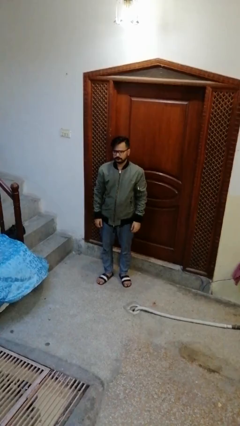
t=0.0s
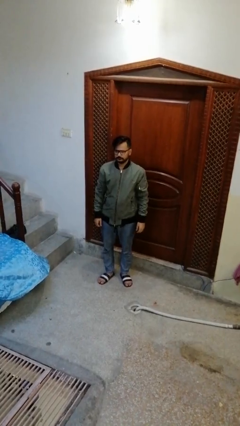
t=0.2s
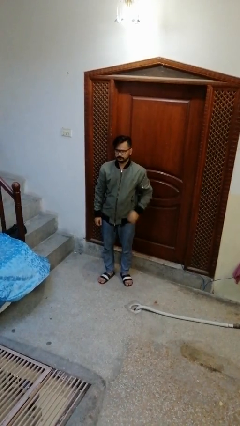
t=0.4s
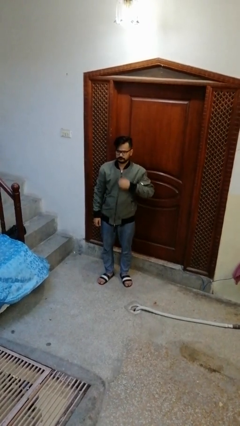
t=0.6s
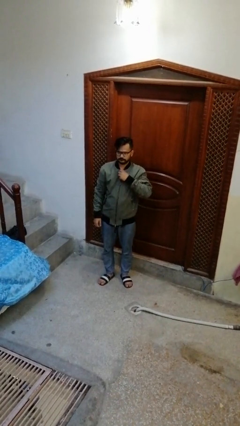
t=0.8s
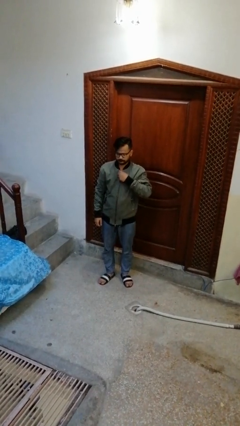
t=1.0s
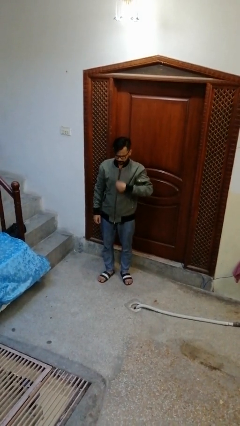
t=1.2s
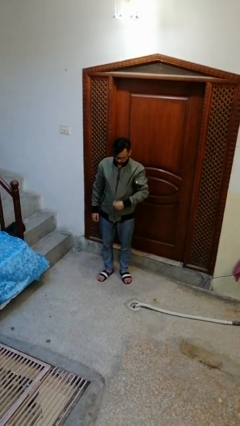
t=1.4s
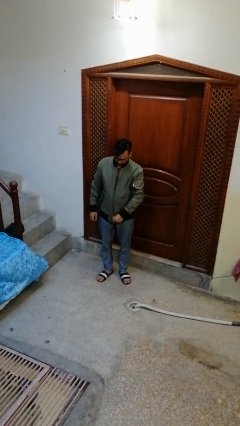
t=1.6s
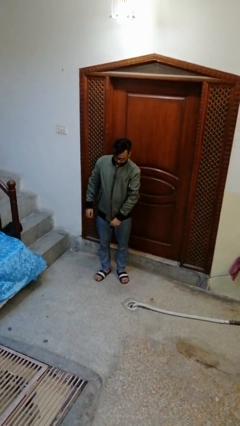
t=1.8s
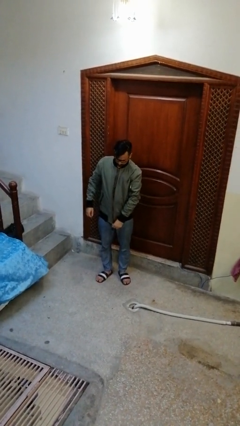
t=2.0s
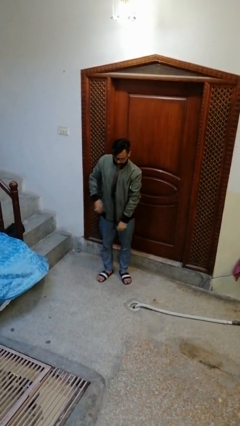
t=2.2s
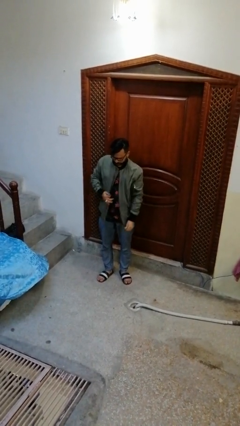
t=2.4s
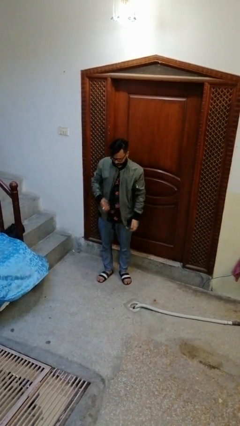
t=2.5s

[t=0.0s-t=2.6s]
person unzips jacket

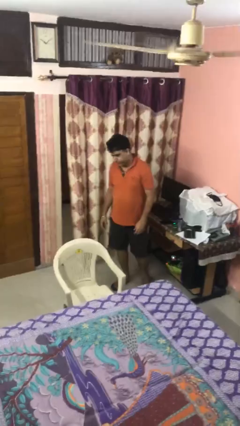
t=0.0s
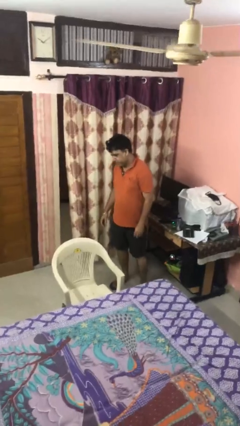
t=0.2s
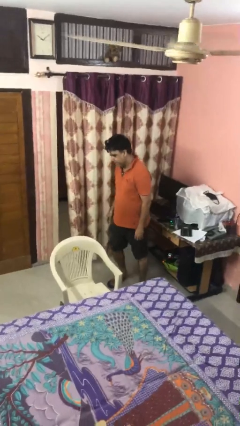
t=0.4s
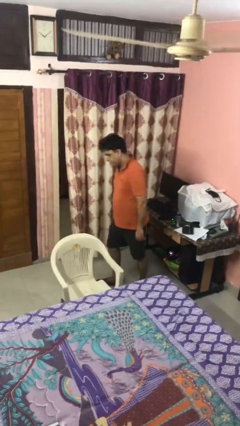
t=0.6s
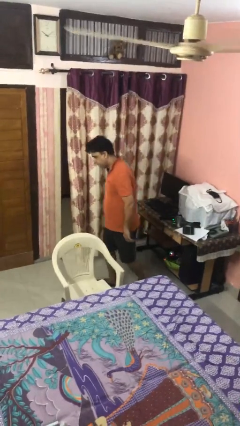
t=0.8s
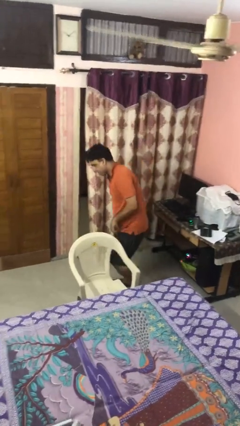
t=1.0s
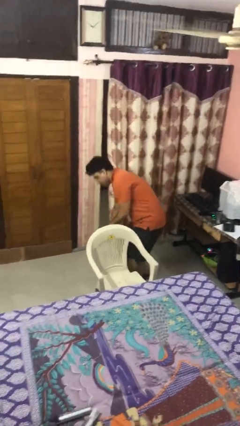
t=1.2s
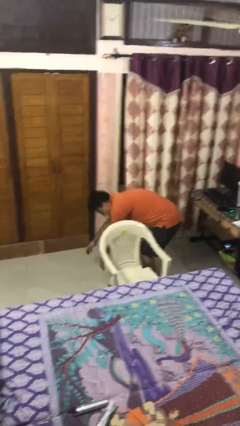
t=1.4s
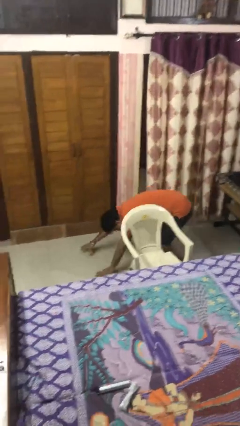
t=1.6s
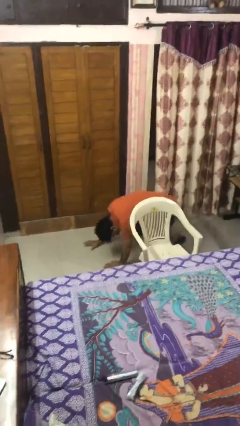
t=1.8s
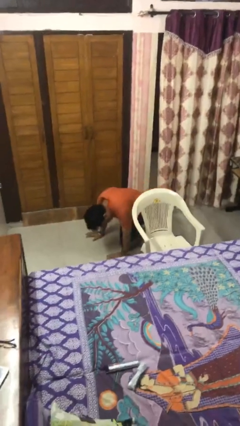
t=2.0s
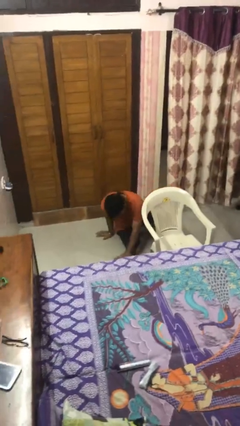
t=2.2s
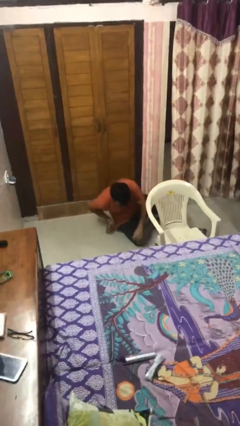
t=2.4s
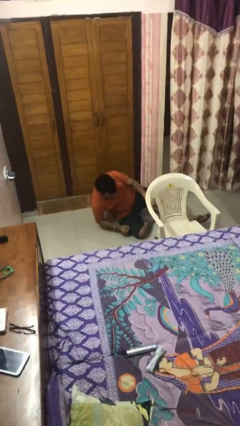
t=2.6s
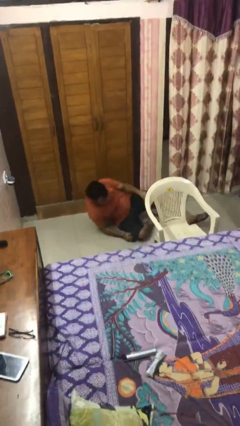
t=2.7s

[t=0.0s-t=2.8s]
person trips on object on floor

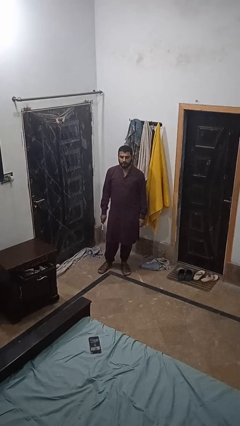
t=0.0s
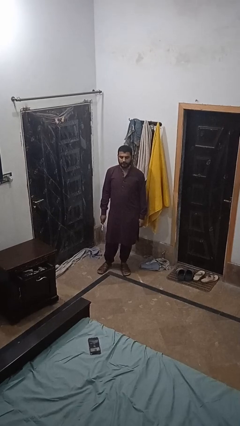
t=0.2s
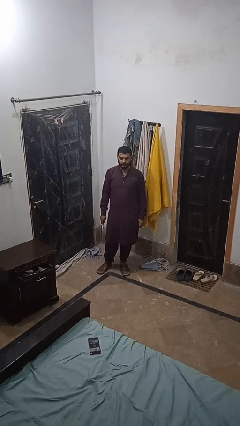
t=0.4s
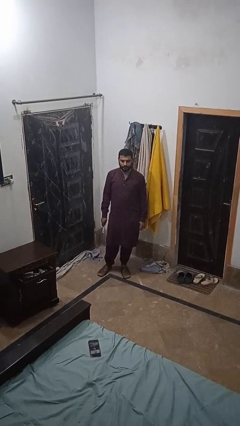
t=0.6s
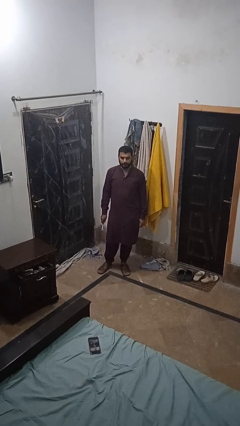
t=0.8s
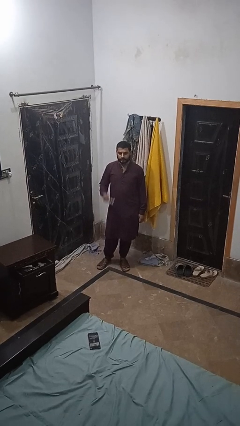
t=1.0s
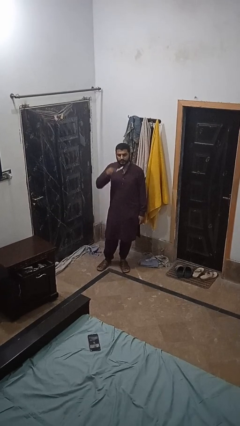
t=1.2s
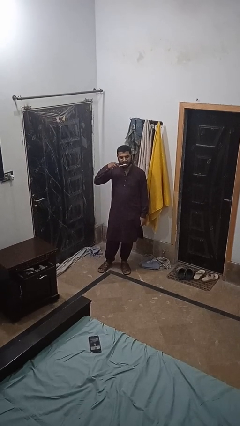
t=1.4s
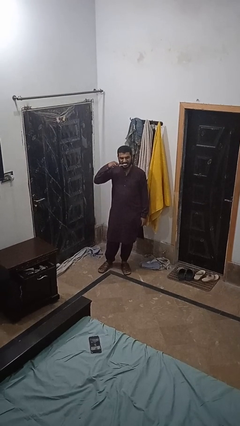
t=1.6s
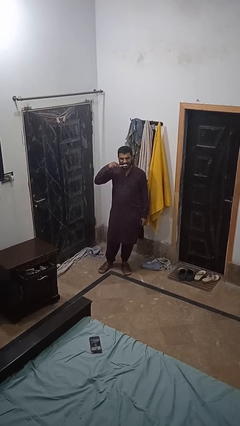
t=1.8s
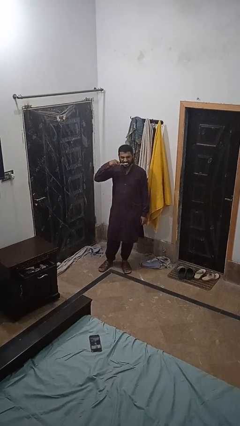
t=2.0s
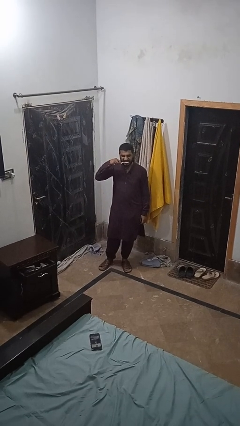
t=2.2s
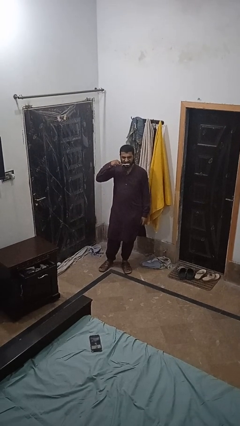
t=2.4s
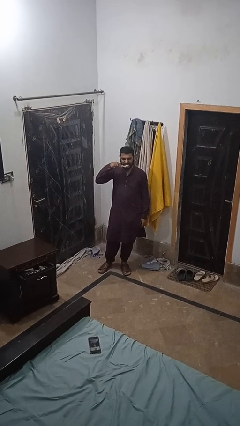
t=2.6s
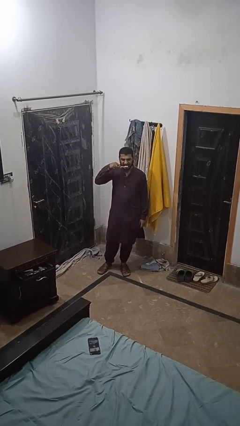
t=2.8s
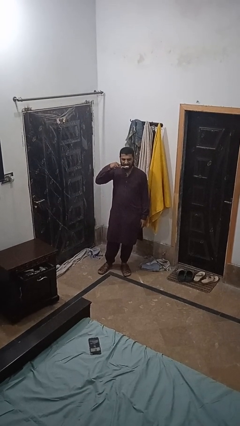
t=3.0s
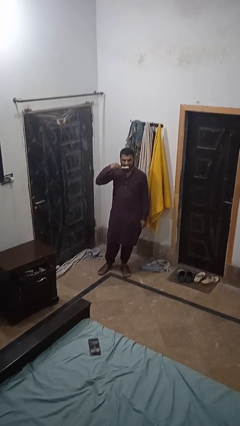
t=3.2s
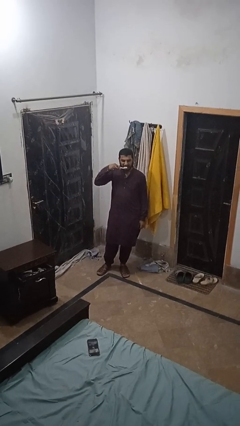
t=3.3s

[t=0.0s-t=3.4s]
person brushes teeth

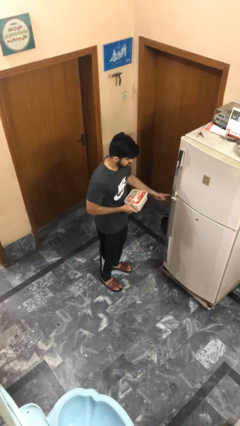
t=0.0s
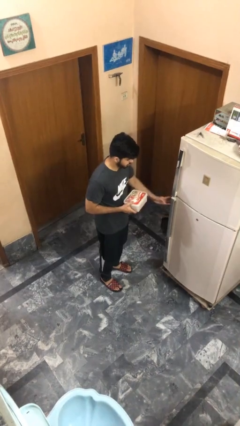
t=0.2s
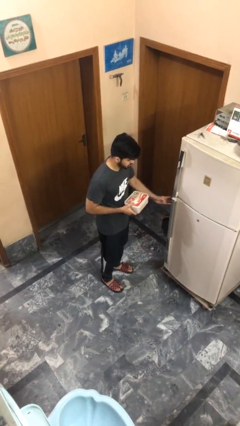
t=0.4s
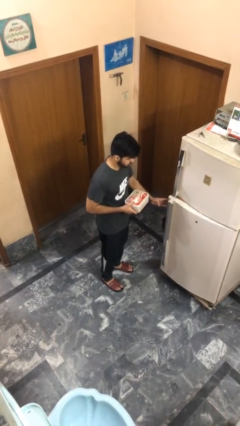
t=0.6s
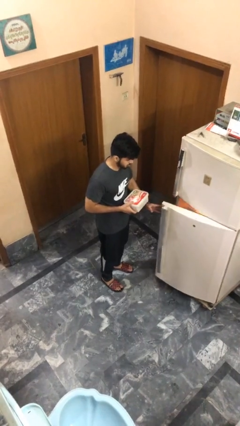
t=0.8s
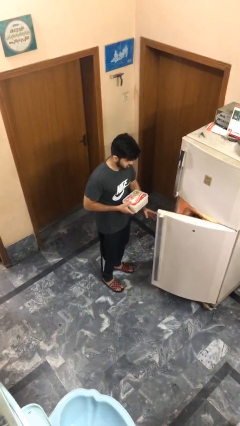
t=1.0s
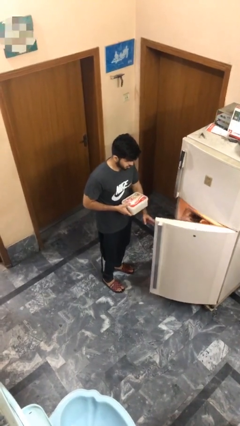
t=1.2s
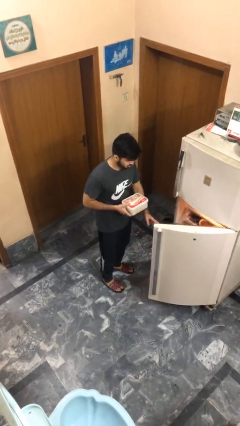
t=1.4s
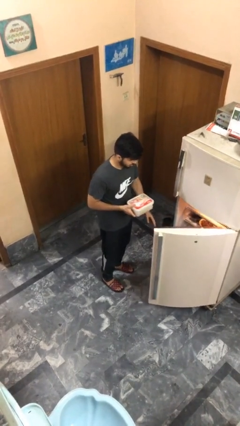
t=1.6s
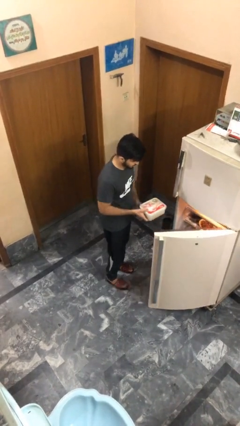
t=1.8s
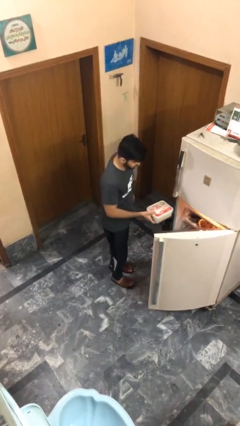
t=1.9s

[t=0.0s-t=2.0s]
person opens refrigerator

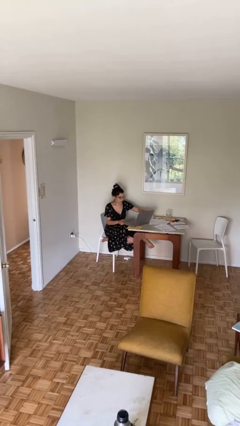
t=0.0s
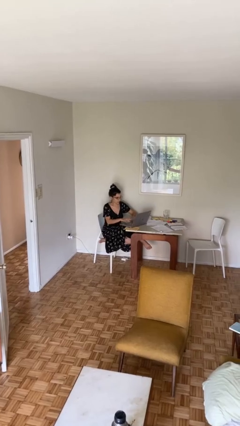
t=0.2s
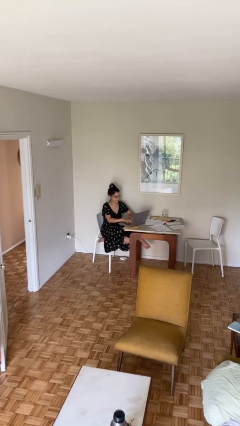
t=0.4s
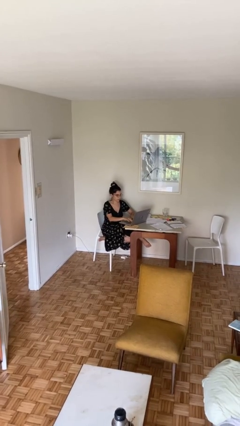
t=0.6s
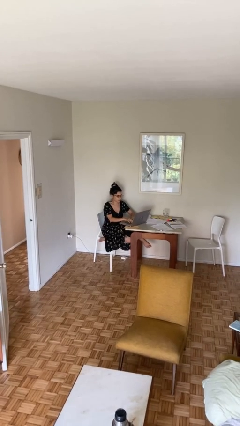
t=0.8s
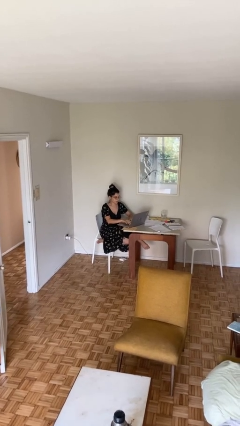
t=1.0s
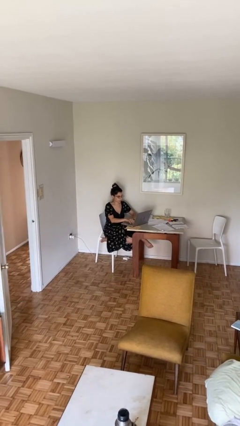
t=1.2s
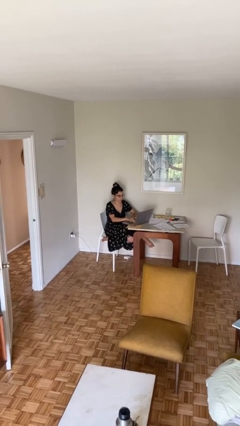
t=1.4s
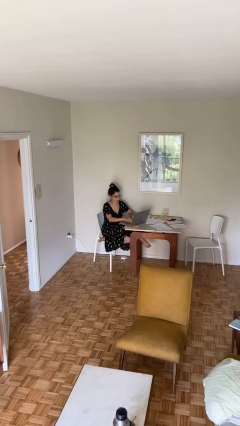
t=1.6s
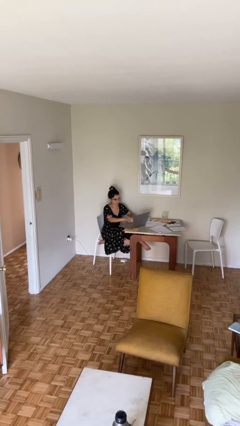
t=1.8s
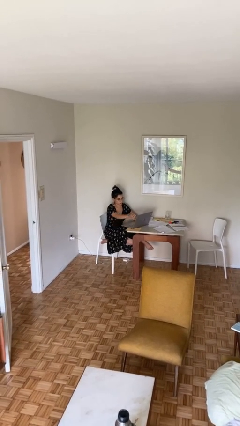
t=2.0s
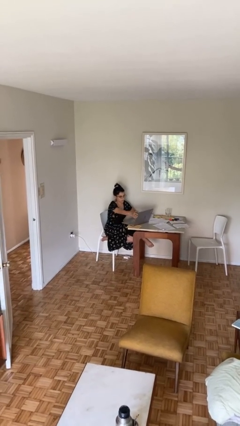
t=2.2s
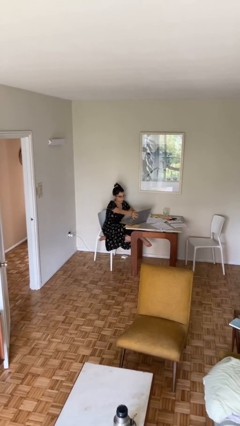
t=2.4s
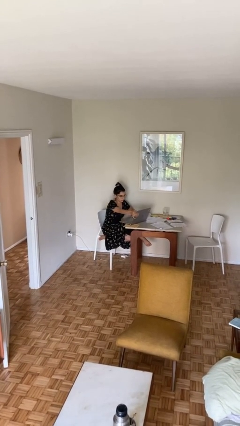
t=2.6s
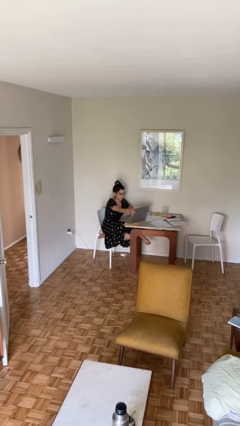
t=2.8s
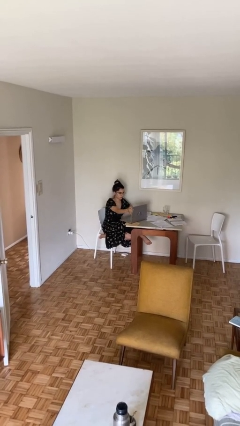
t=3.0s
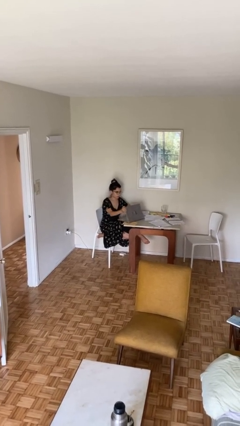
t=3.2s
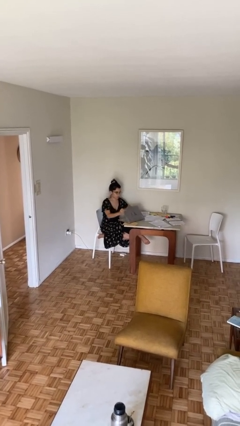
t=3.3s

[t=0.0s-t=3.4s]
person interacts with laptop

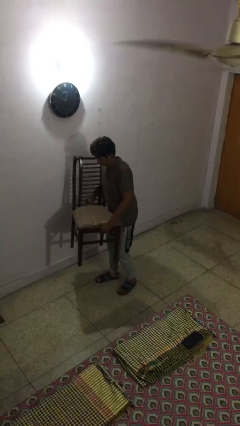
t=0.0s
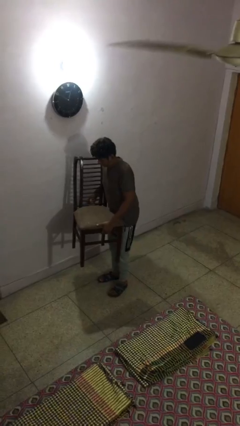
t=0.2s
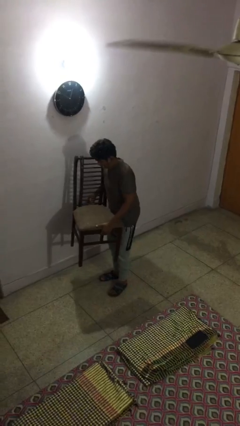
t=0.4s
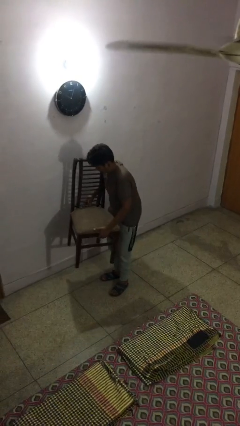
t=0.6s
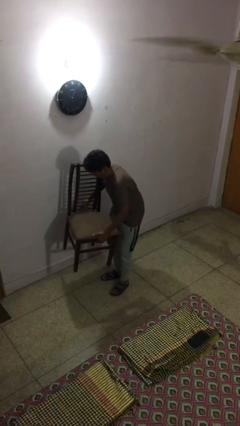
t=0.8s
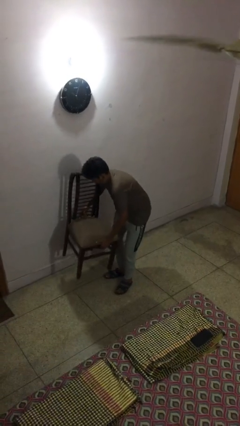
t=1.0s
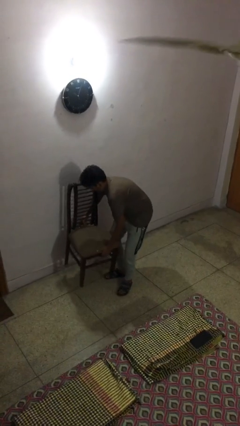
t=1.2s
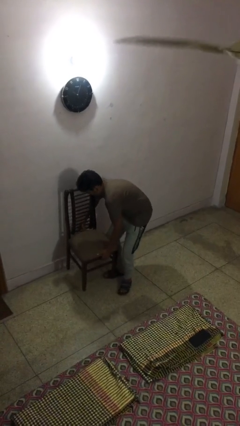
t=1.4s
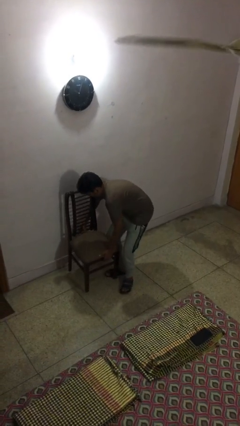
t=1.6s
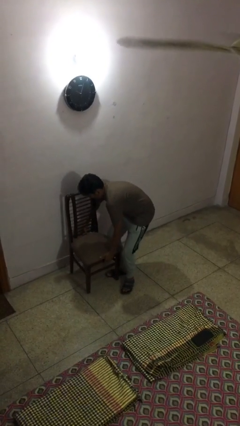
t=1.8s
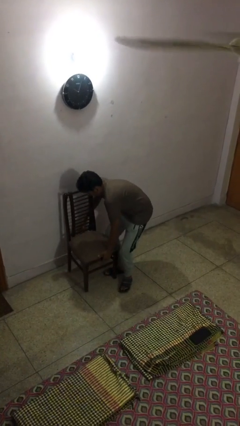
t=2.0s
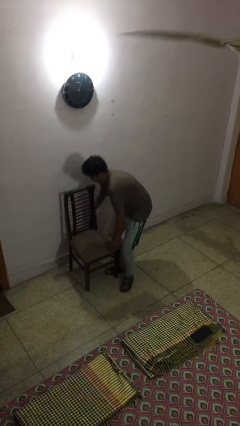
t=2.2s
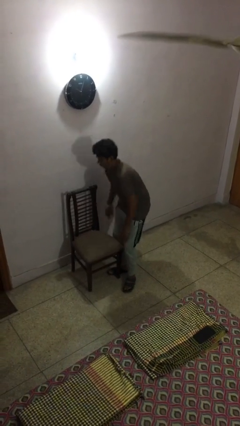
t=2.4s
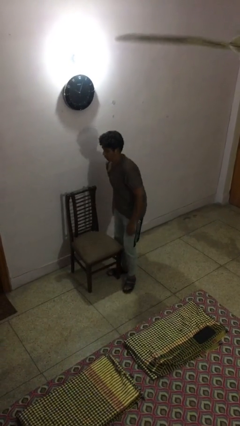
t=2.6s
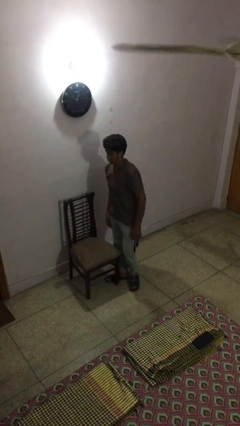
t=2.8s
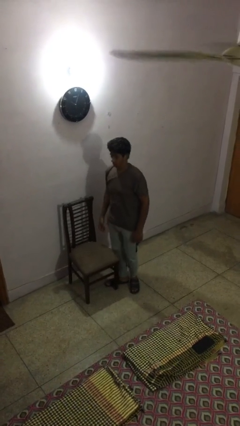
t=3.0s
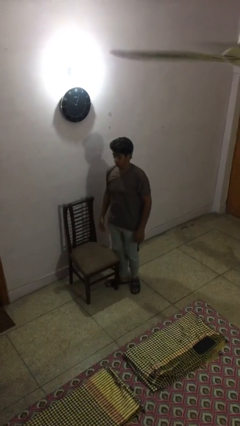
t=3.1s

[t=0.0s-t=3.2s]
person puts down object on floor
